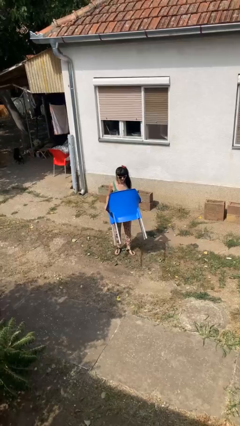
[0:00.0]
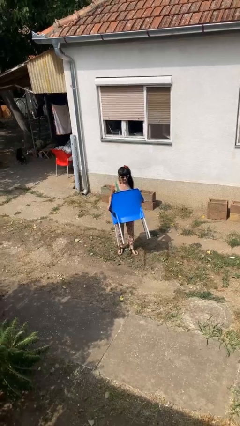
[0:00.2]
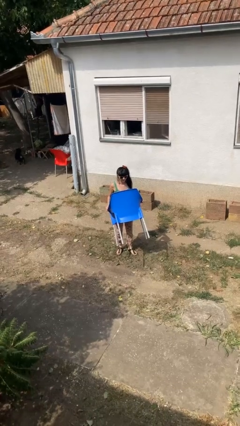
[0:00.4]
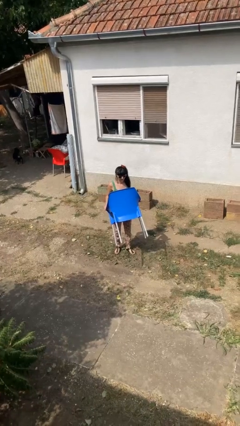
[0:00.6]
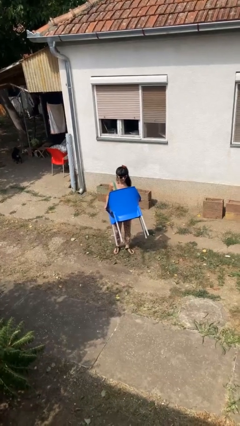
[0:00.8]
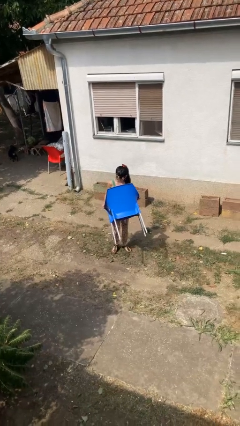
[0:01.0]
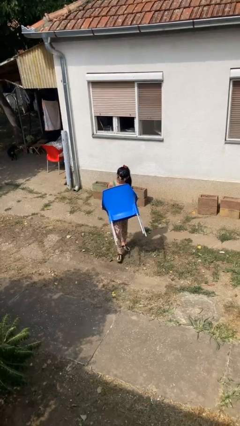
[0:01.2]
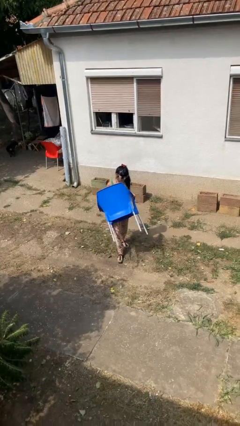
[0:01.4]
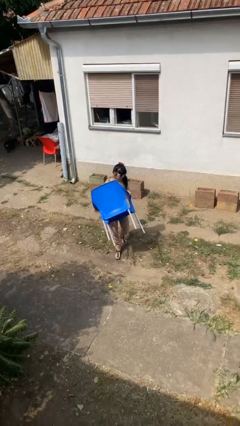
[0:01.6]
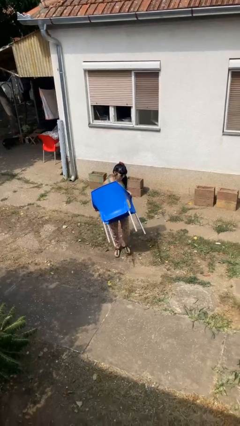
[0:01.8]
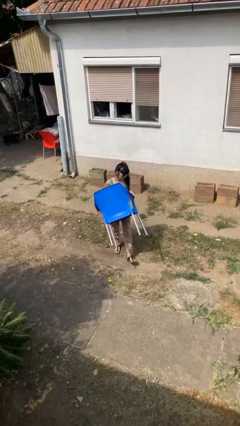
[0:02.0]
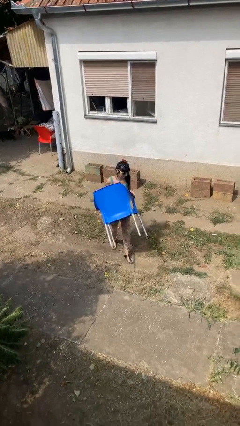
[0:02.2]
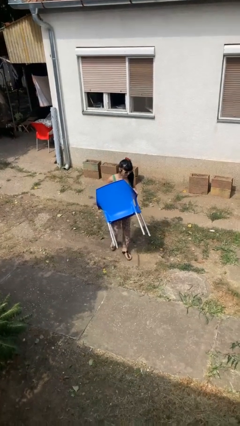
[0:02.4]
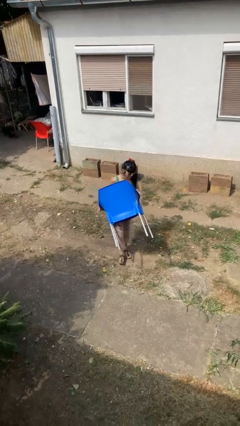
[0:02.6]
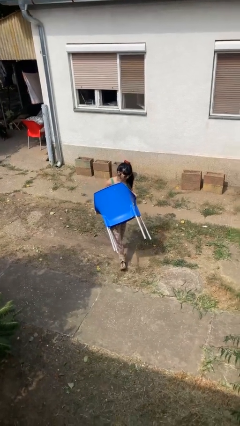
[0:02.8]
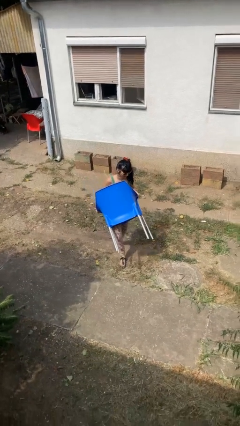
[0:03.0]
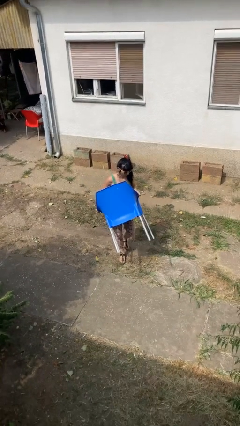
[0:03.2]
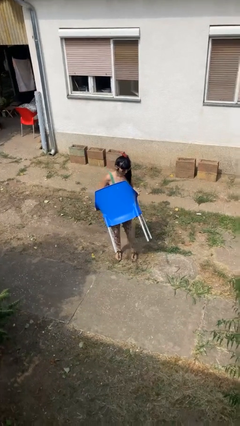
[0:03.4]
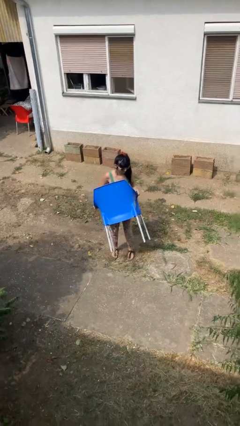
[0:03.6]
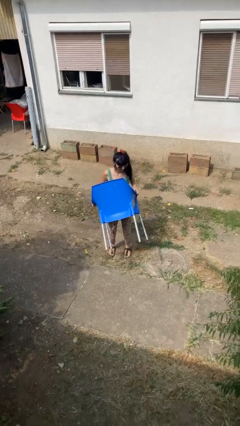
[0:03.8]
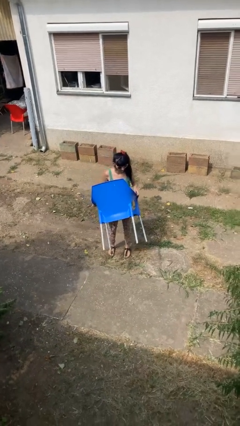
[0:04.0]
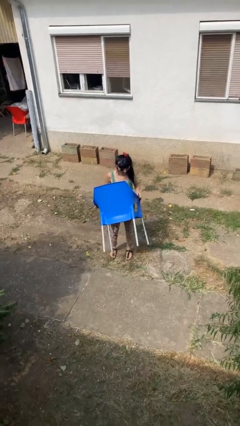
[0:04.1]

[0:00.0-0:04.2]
person carries furniture

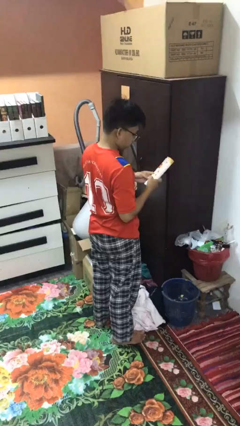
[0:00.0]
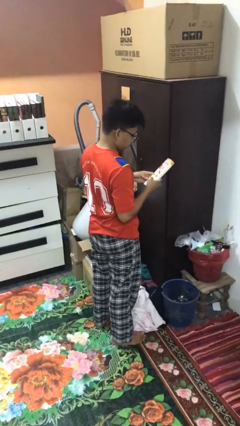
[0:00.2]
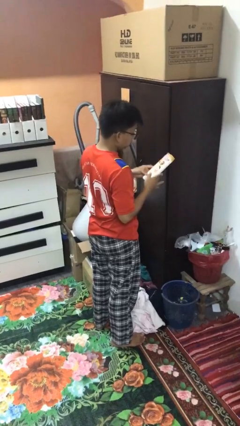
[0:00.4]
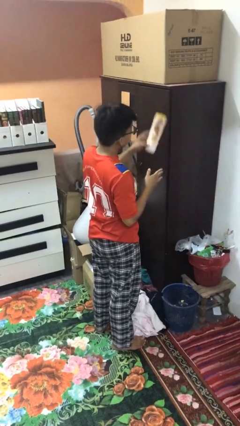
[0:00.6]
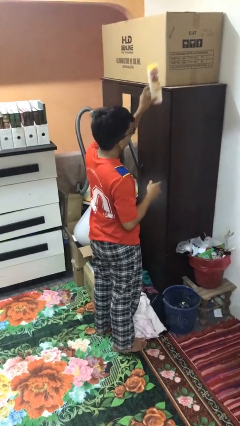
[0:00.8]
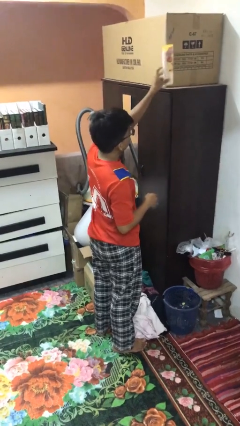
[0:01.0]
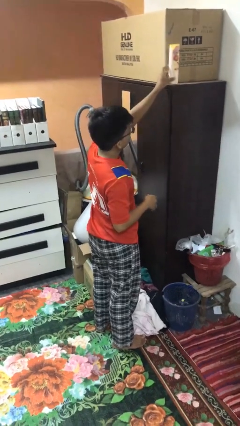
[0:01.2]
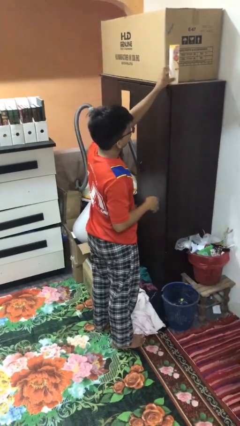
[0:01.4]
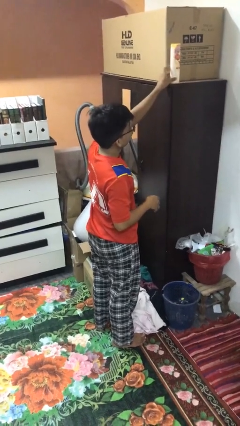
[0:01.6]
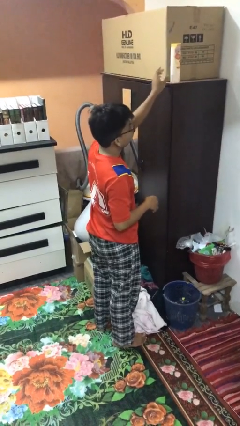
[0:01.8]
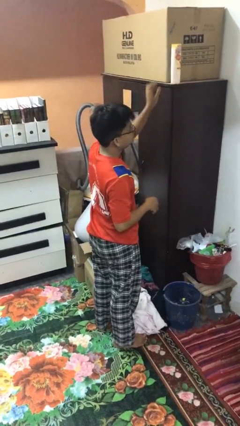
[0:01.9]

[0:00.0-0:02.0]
person puts down object on shelf

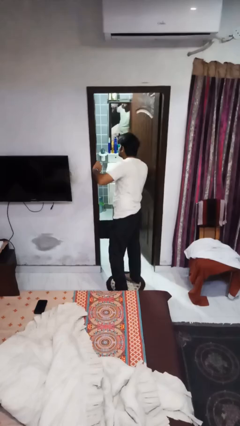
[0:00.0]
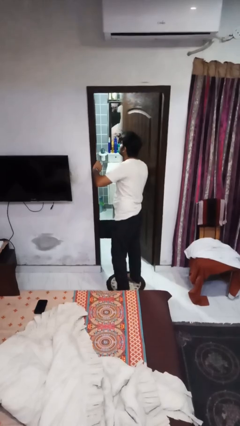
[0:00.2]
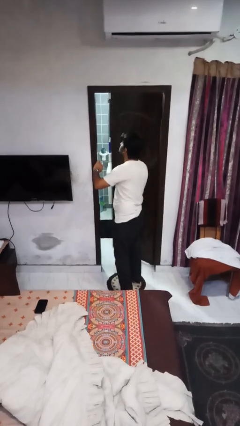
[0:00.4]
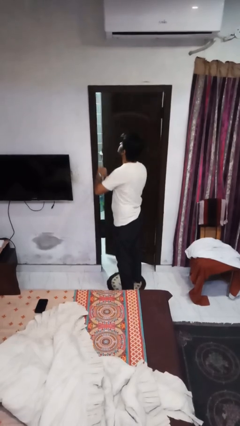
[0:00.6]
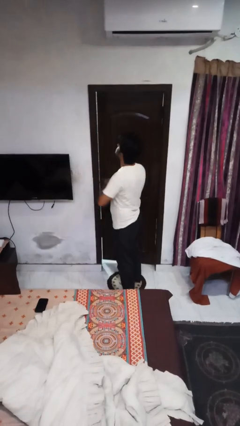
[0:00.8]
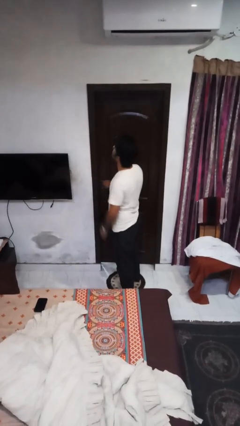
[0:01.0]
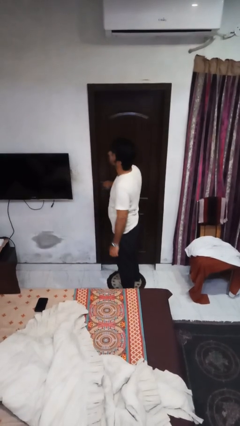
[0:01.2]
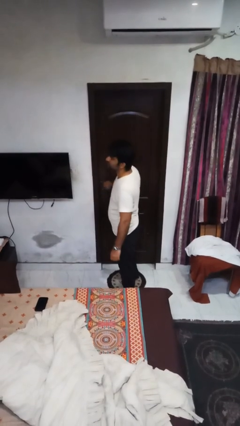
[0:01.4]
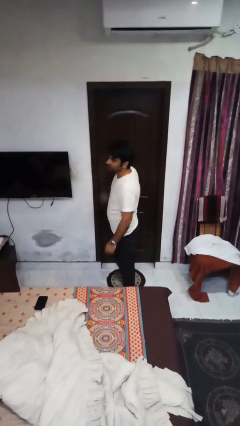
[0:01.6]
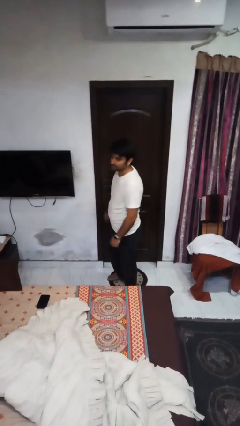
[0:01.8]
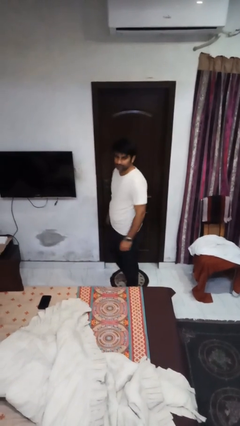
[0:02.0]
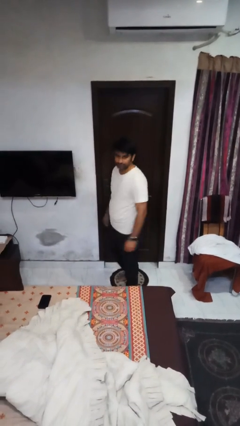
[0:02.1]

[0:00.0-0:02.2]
person closes facility door

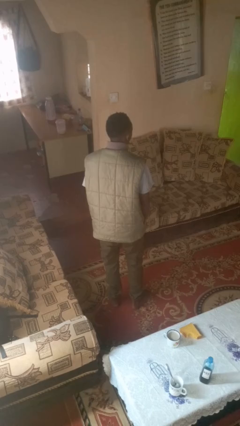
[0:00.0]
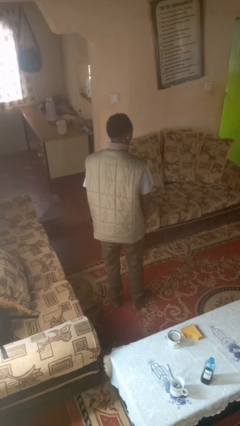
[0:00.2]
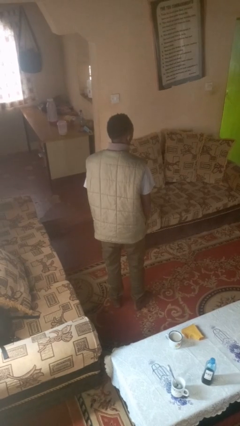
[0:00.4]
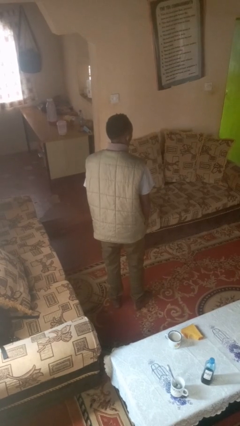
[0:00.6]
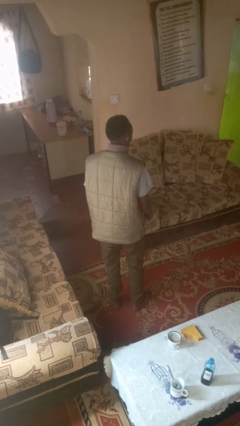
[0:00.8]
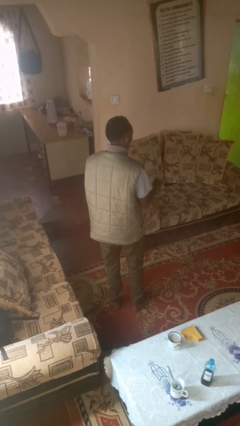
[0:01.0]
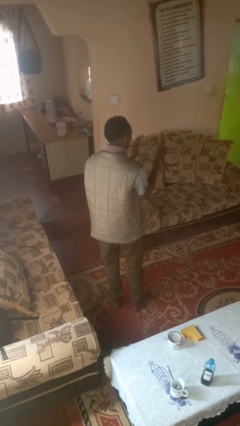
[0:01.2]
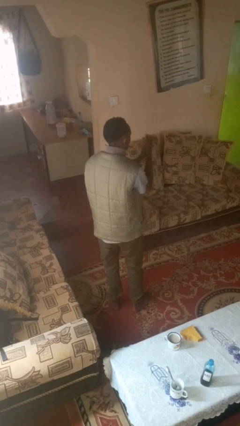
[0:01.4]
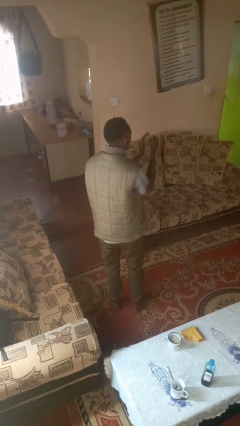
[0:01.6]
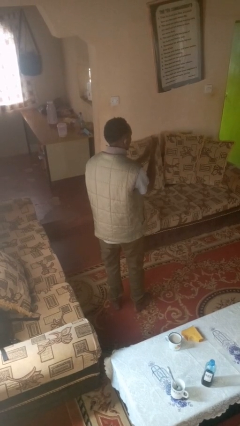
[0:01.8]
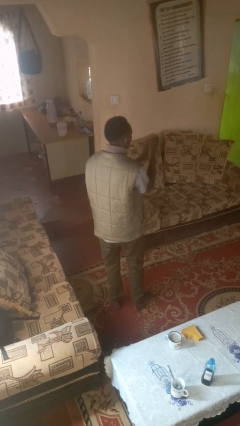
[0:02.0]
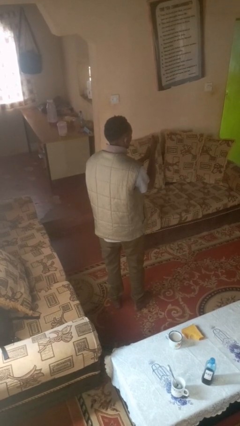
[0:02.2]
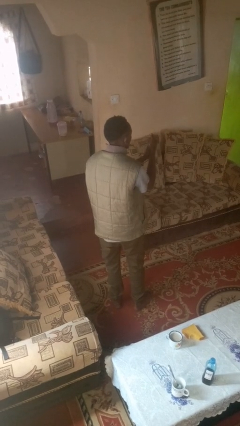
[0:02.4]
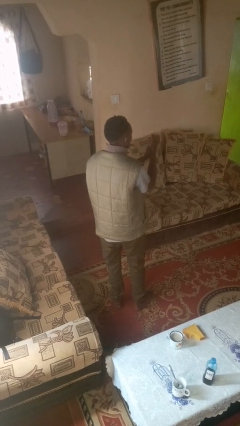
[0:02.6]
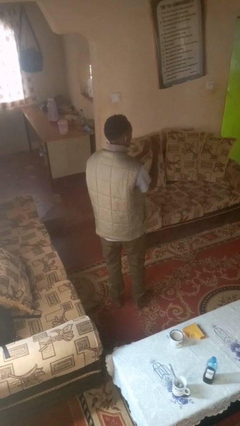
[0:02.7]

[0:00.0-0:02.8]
person claps hands

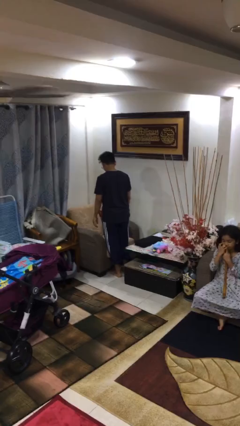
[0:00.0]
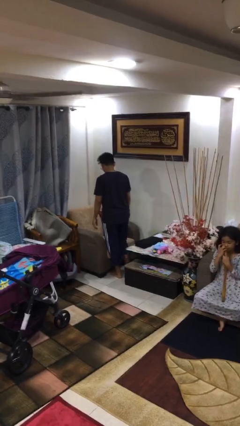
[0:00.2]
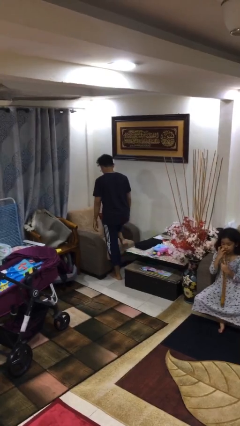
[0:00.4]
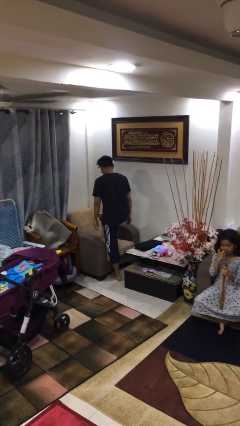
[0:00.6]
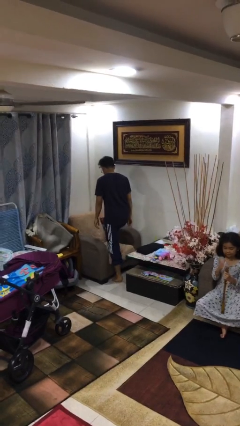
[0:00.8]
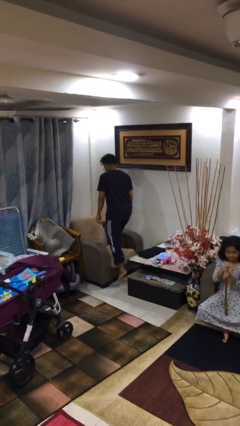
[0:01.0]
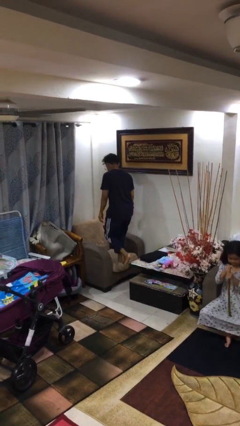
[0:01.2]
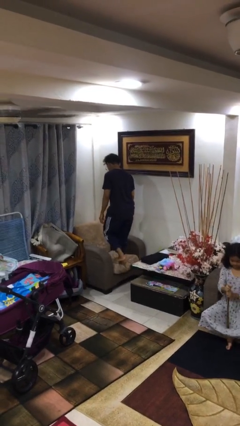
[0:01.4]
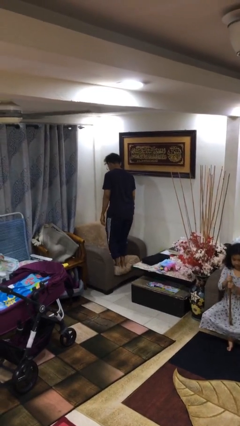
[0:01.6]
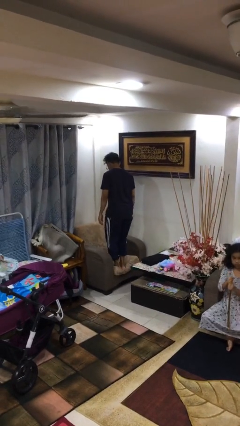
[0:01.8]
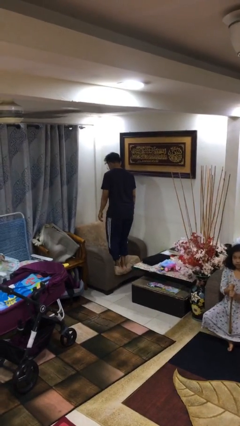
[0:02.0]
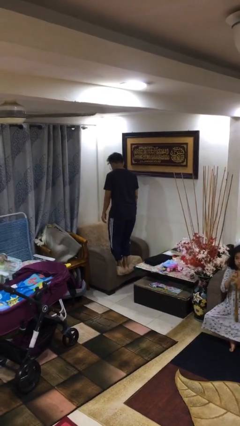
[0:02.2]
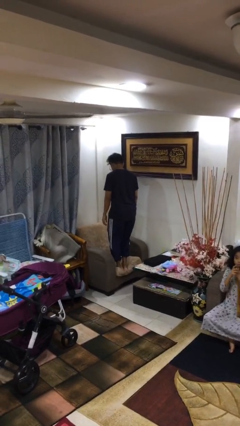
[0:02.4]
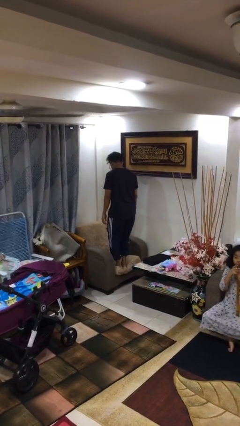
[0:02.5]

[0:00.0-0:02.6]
person climbs on couch

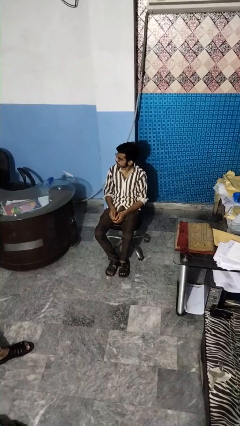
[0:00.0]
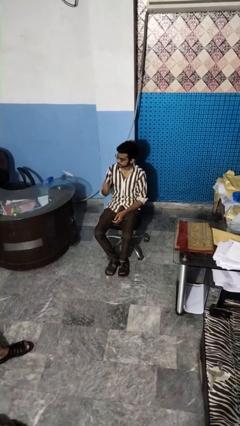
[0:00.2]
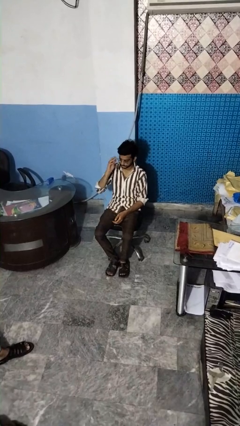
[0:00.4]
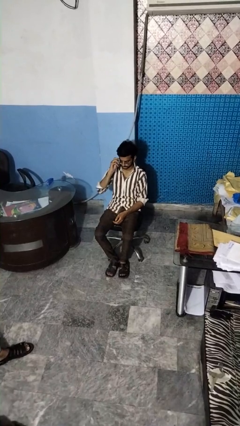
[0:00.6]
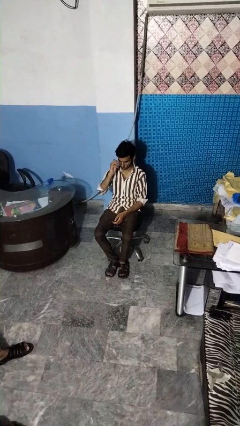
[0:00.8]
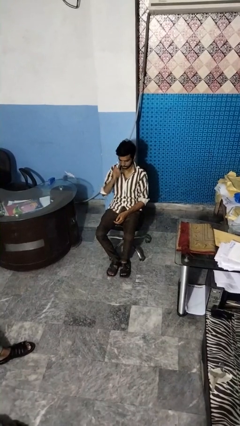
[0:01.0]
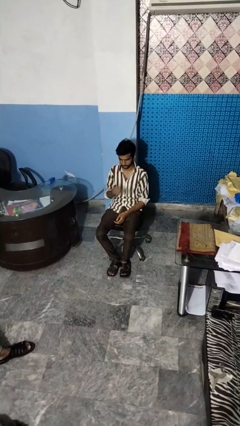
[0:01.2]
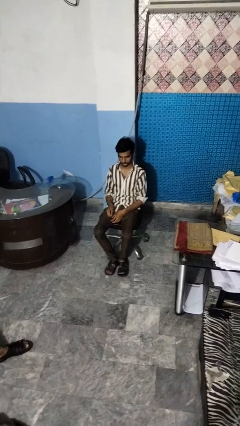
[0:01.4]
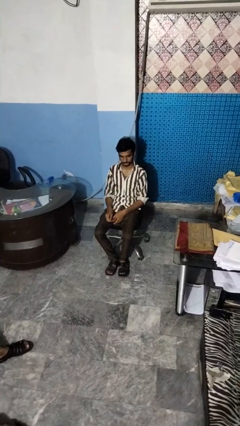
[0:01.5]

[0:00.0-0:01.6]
person takes off glasses

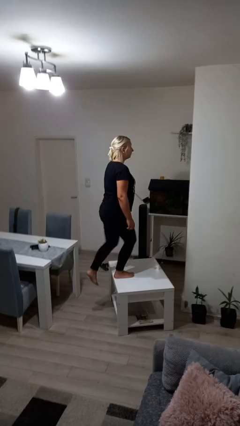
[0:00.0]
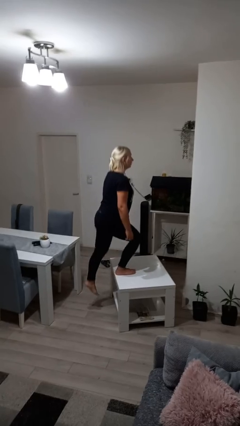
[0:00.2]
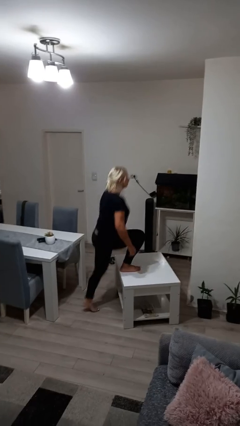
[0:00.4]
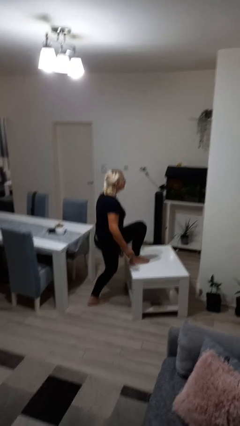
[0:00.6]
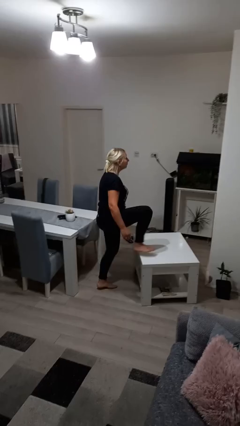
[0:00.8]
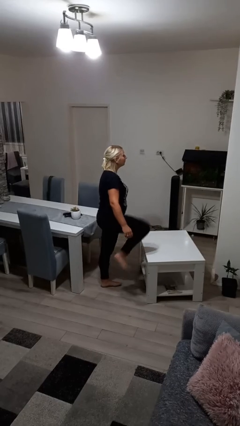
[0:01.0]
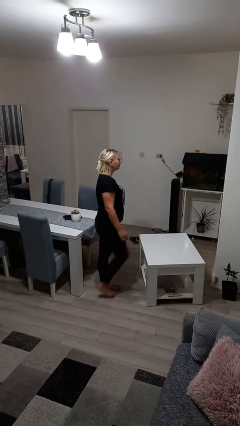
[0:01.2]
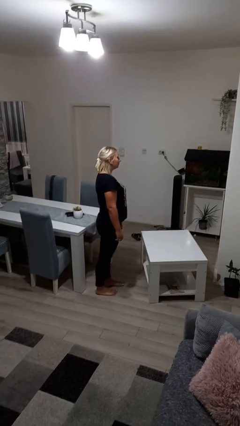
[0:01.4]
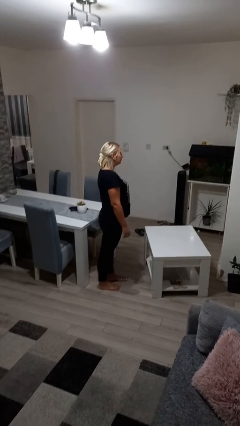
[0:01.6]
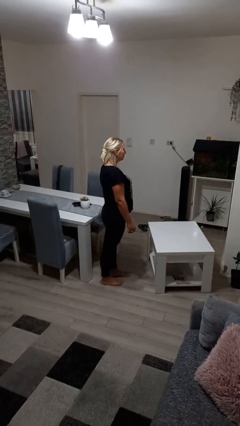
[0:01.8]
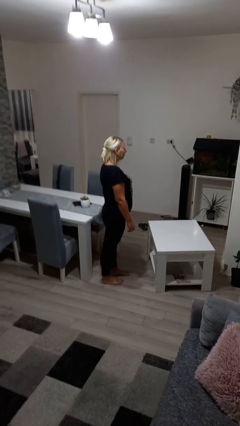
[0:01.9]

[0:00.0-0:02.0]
person climbs off table
